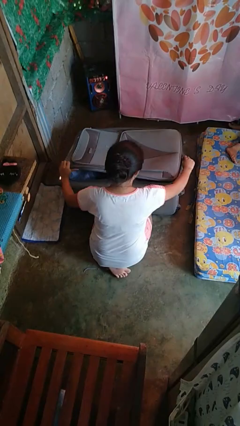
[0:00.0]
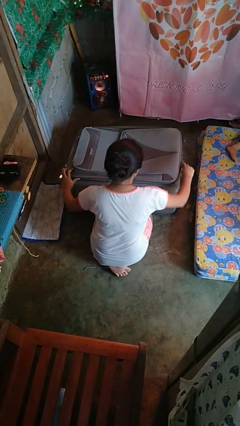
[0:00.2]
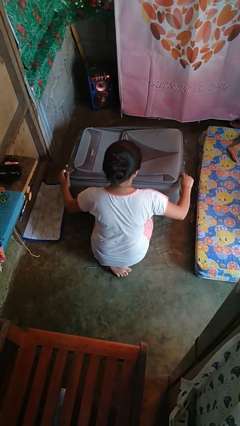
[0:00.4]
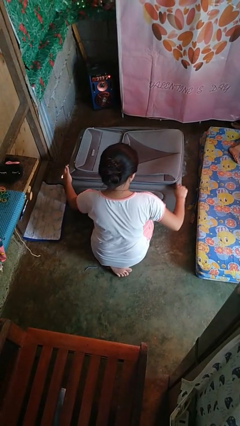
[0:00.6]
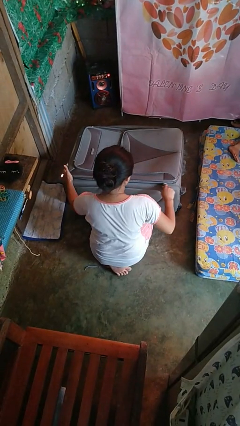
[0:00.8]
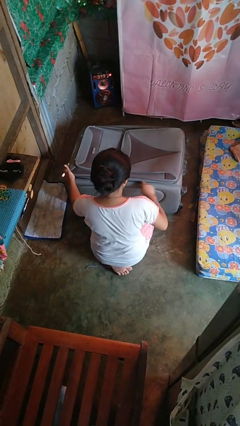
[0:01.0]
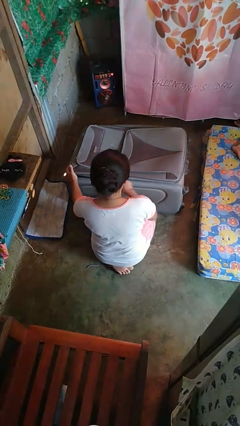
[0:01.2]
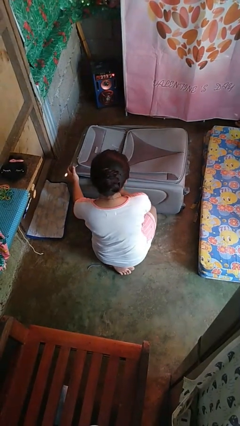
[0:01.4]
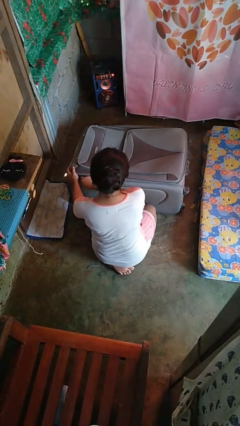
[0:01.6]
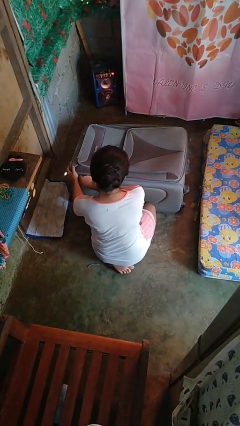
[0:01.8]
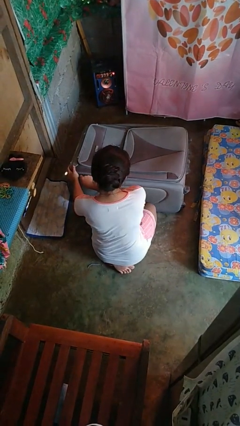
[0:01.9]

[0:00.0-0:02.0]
person closes suitcase

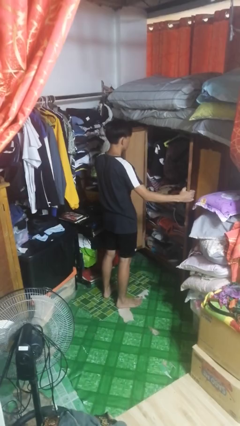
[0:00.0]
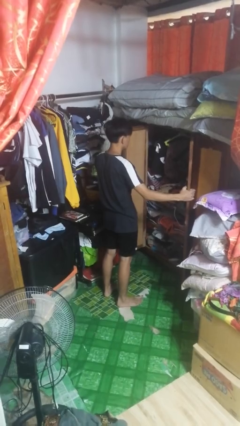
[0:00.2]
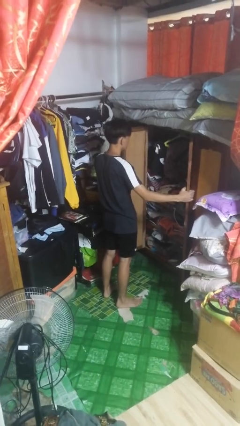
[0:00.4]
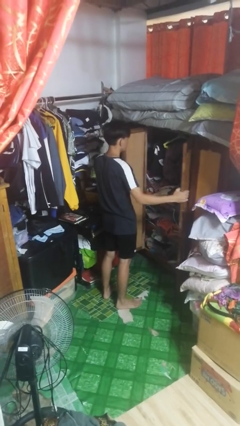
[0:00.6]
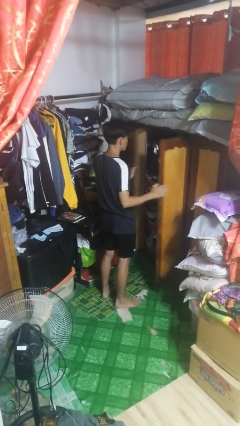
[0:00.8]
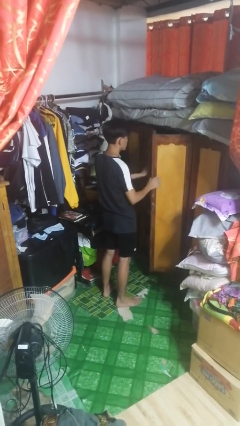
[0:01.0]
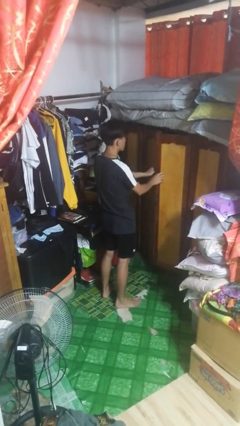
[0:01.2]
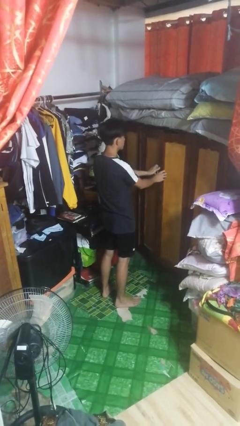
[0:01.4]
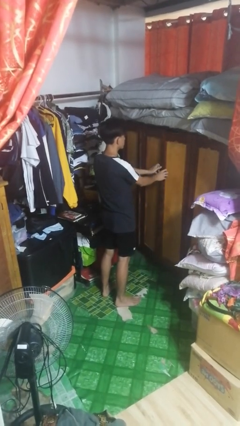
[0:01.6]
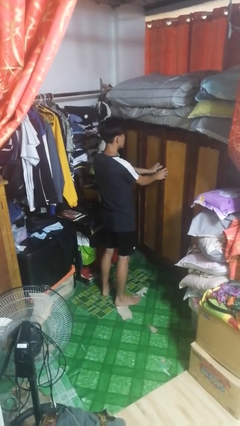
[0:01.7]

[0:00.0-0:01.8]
person closes dresser drawer

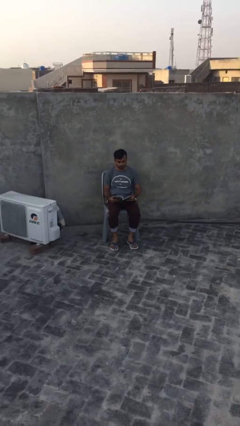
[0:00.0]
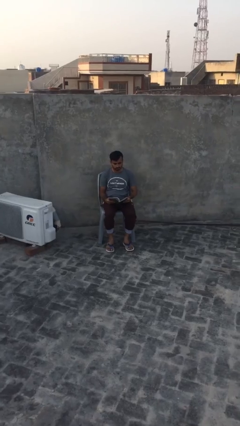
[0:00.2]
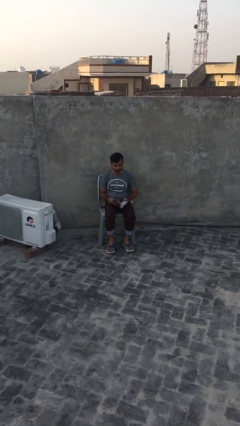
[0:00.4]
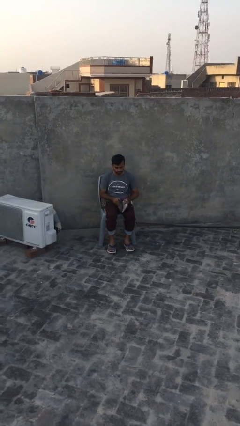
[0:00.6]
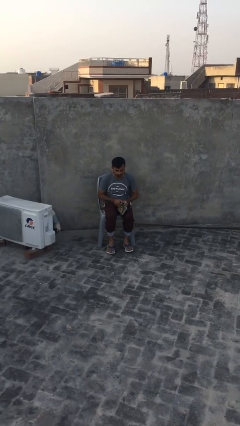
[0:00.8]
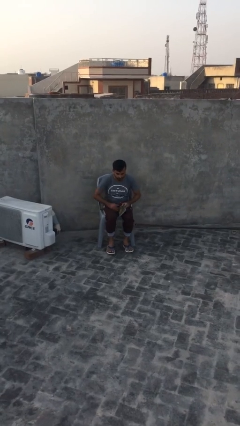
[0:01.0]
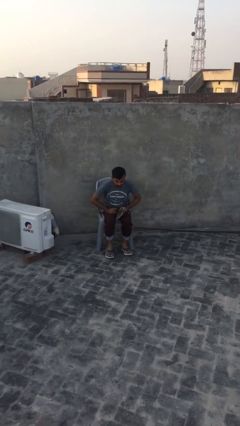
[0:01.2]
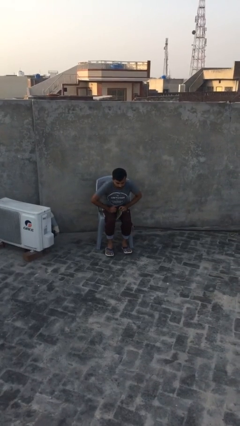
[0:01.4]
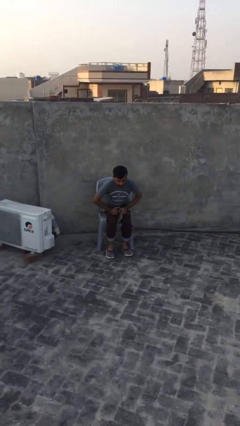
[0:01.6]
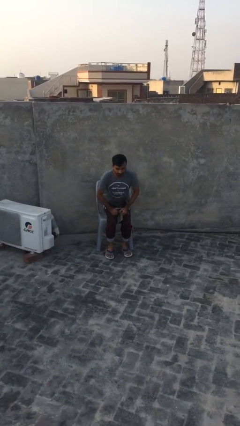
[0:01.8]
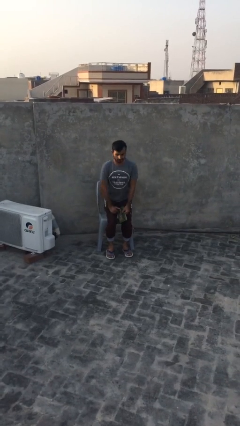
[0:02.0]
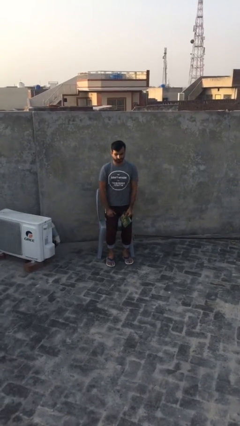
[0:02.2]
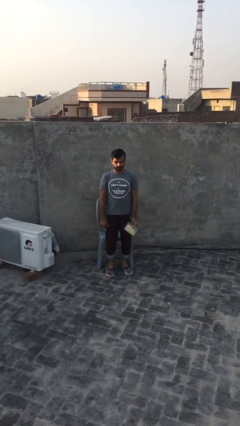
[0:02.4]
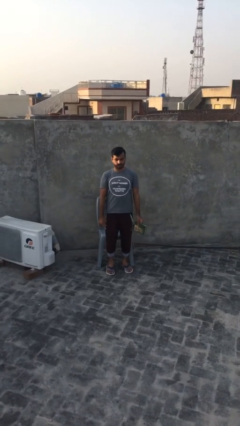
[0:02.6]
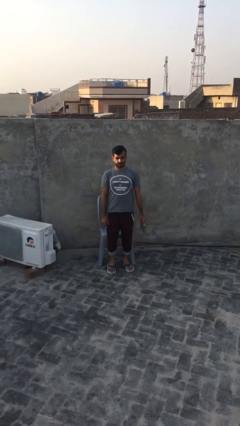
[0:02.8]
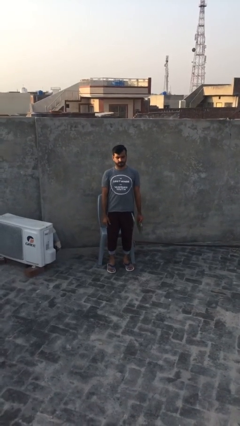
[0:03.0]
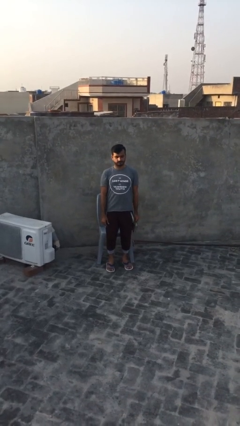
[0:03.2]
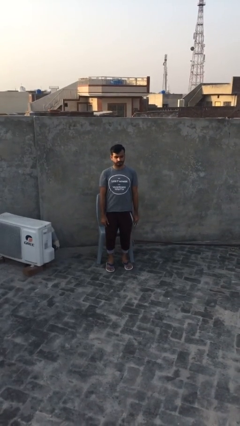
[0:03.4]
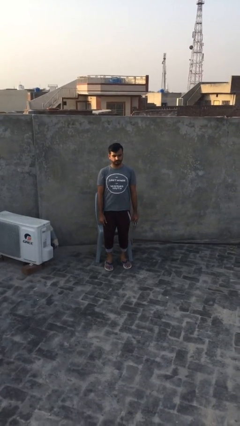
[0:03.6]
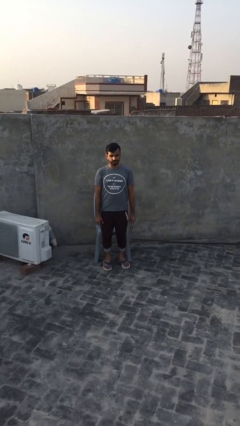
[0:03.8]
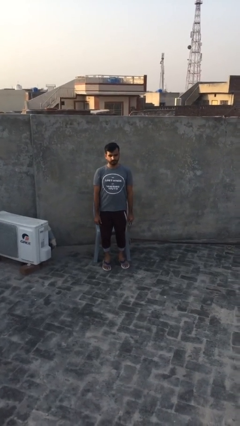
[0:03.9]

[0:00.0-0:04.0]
person stands up

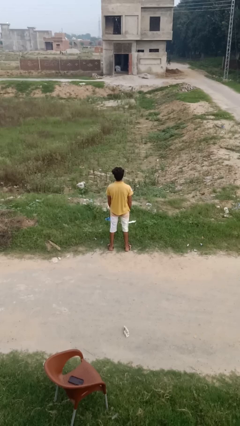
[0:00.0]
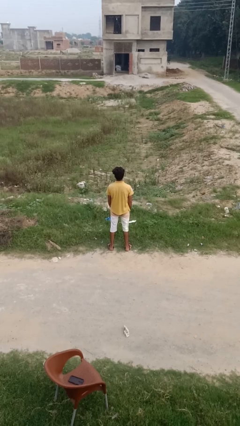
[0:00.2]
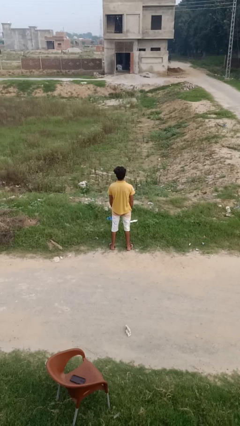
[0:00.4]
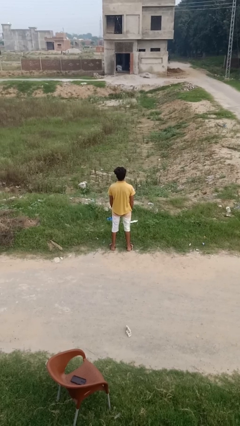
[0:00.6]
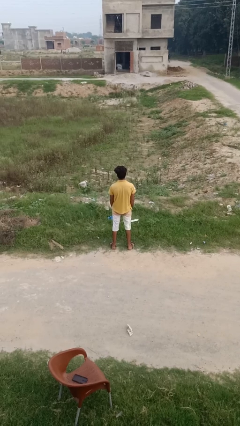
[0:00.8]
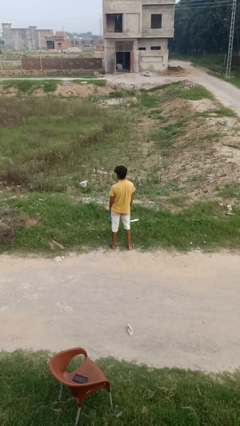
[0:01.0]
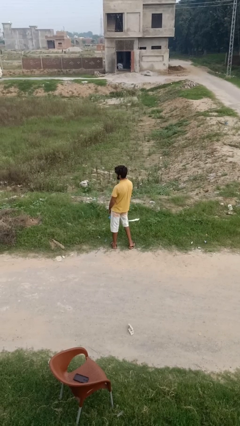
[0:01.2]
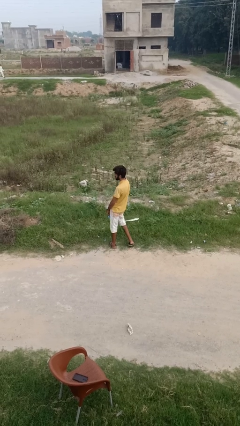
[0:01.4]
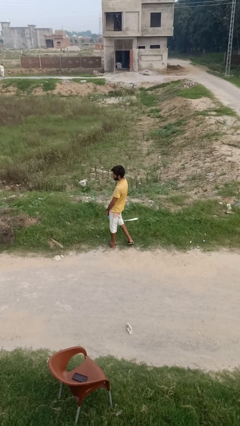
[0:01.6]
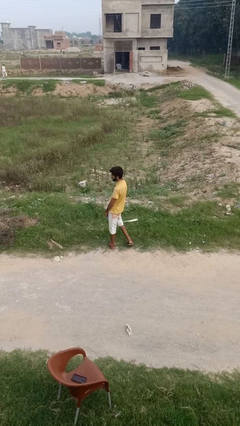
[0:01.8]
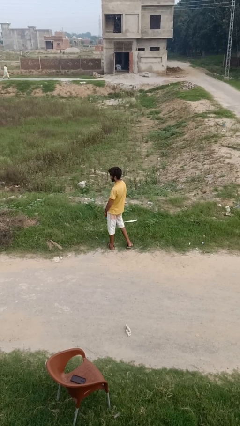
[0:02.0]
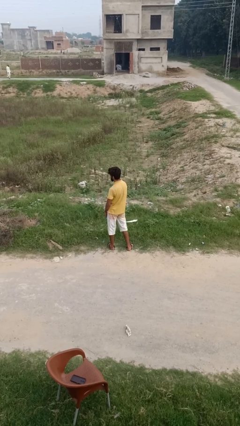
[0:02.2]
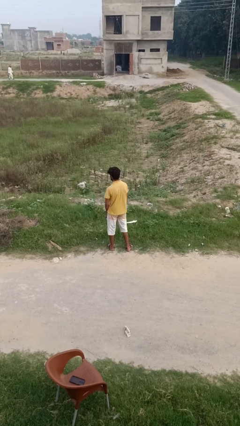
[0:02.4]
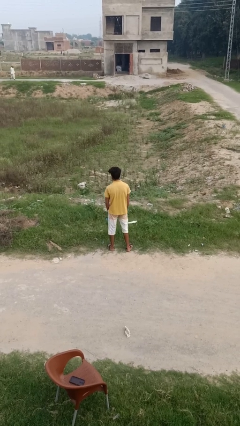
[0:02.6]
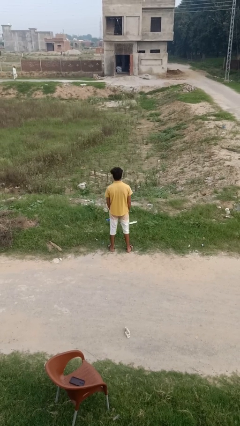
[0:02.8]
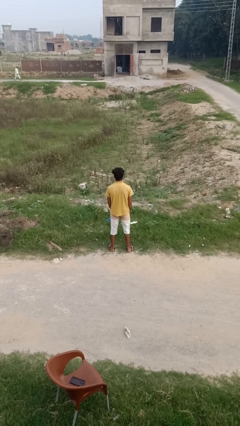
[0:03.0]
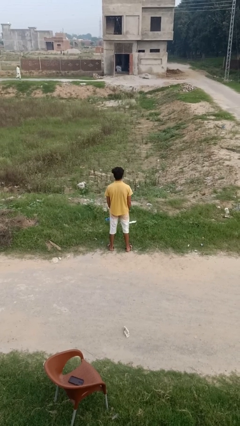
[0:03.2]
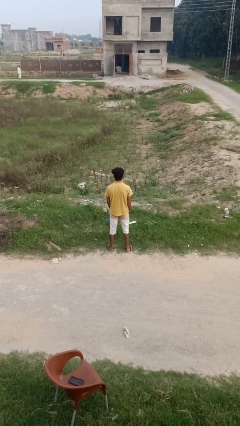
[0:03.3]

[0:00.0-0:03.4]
person twirls

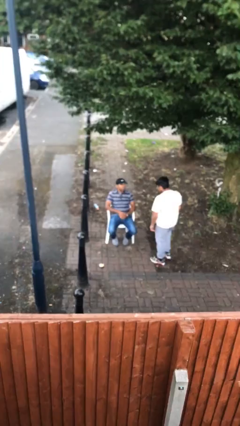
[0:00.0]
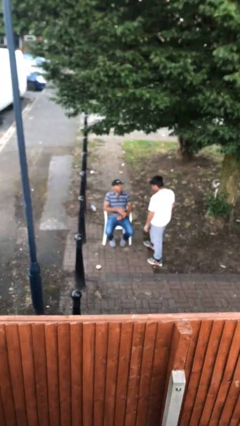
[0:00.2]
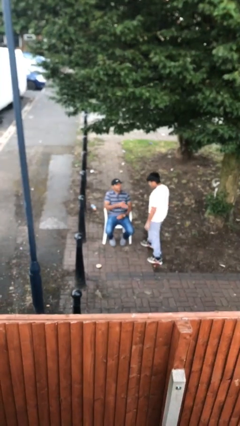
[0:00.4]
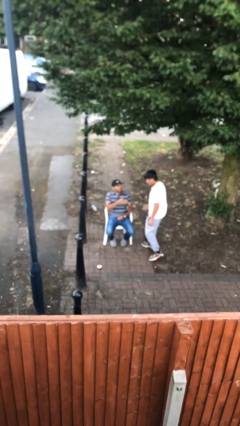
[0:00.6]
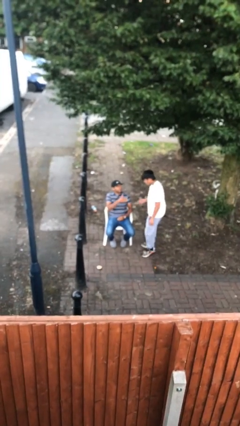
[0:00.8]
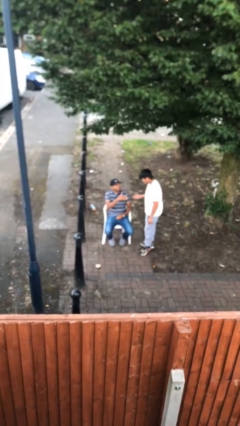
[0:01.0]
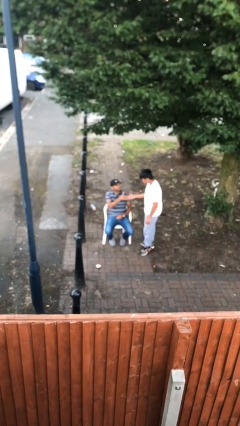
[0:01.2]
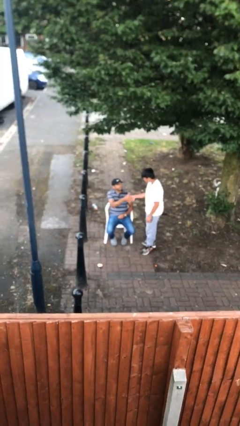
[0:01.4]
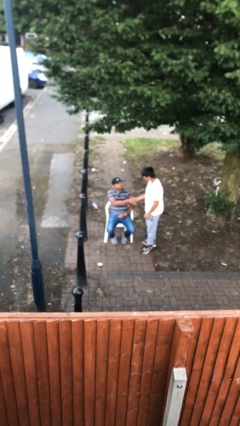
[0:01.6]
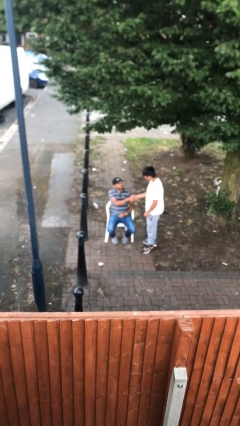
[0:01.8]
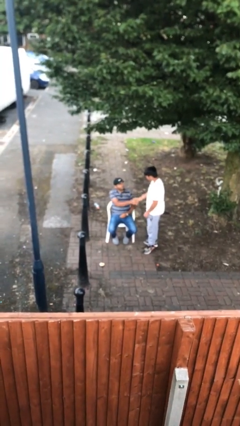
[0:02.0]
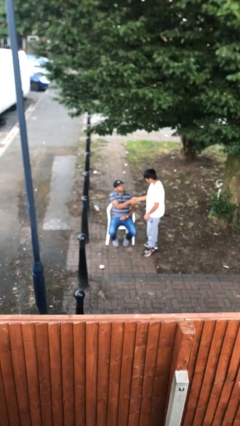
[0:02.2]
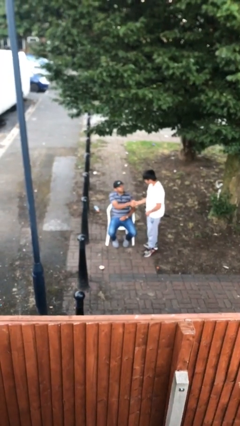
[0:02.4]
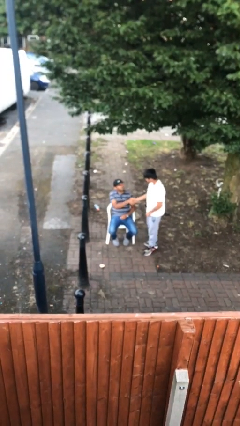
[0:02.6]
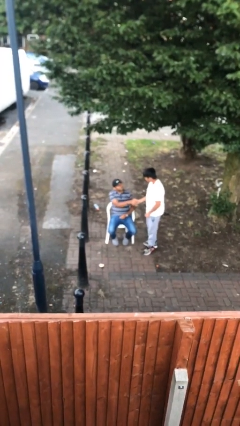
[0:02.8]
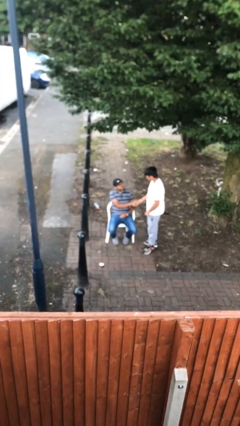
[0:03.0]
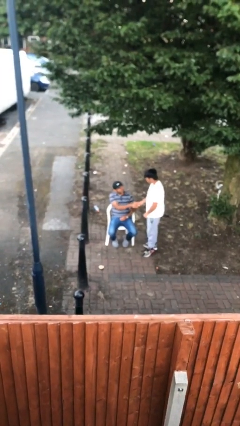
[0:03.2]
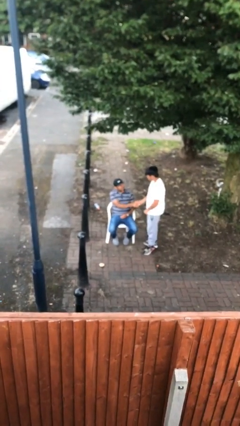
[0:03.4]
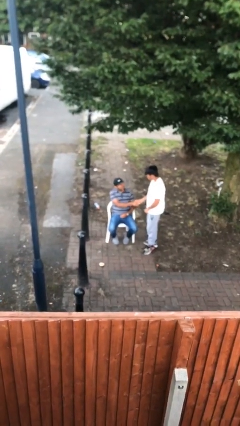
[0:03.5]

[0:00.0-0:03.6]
person shakes hand

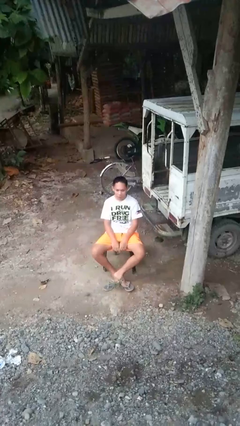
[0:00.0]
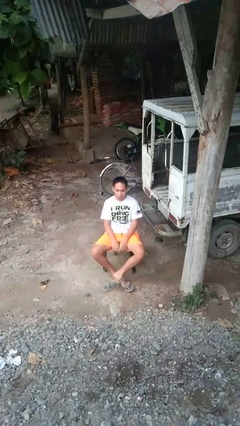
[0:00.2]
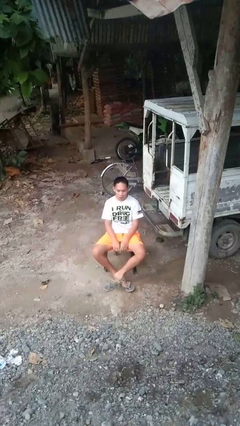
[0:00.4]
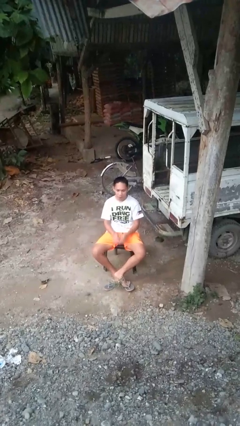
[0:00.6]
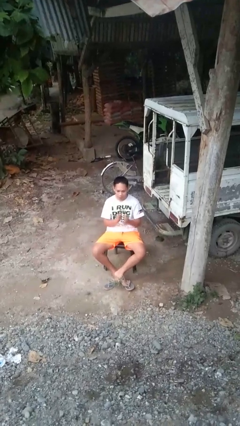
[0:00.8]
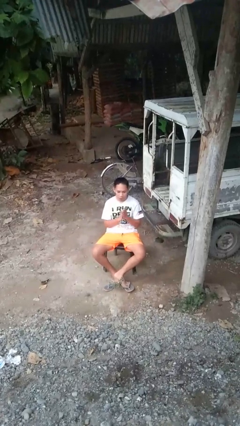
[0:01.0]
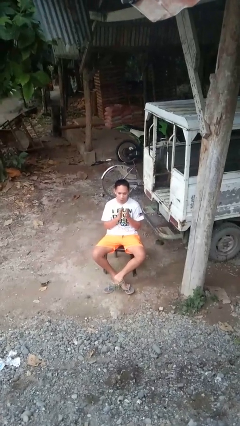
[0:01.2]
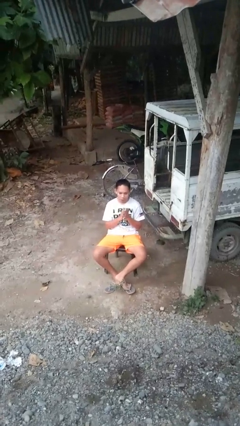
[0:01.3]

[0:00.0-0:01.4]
person claps hands

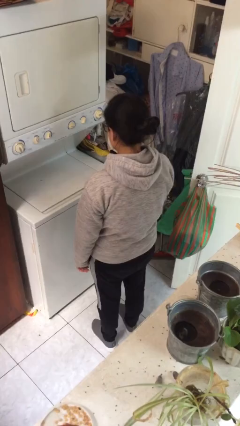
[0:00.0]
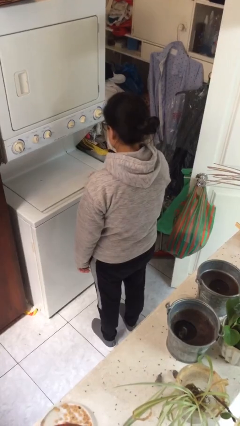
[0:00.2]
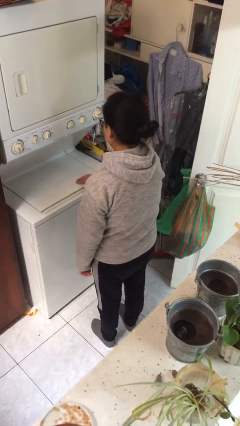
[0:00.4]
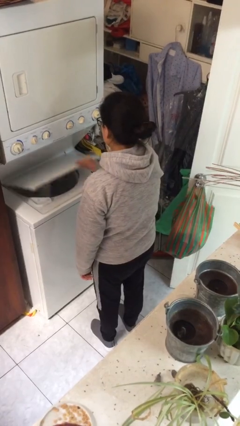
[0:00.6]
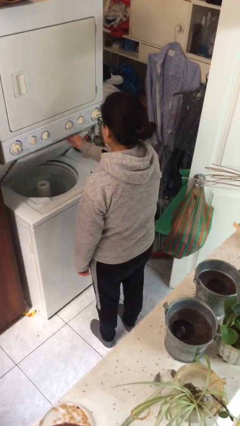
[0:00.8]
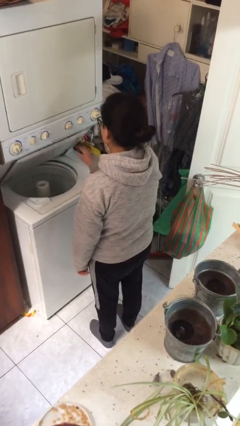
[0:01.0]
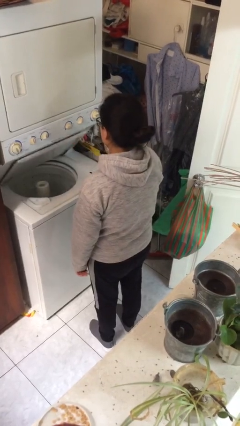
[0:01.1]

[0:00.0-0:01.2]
person opens clothes washer

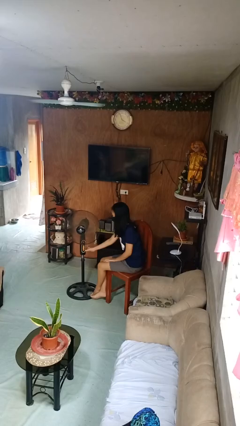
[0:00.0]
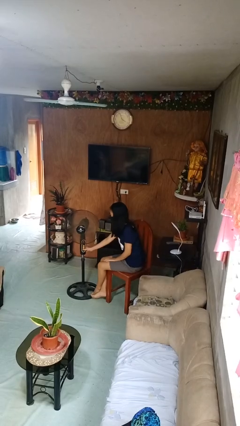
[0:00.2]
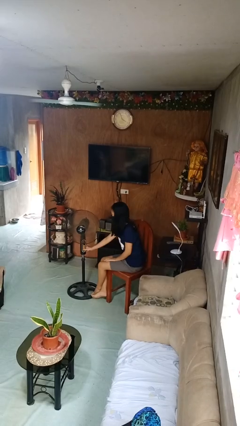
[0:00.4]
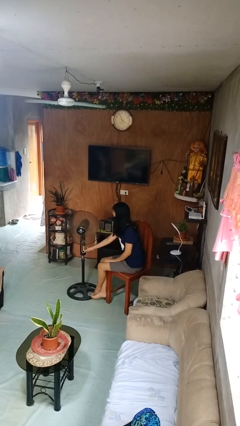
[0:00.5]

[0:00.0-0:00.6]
person turns off fan